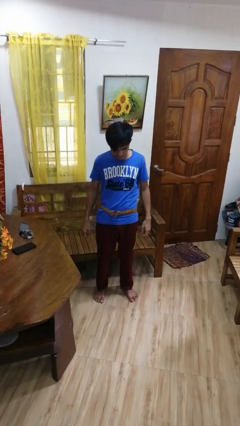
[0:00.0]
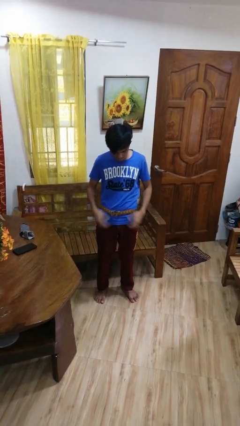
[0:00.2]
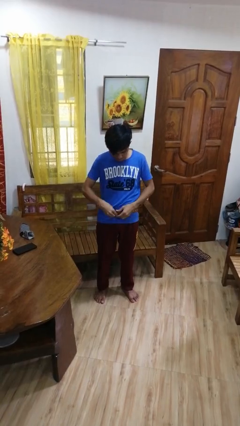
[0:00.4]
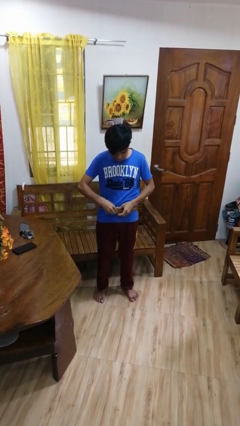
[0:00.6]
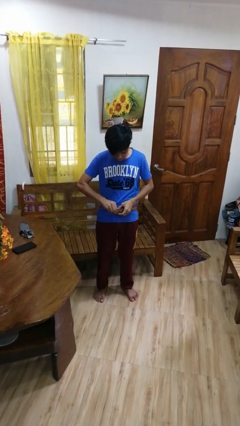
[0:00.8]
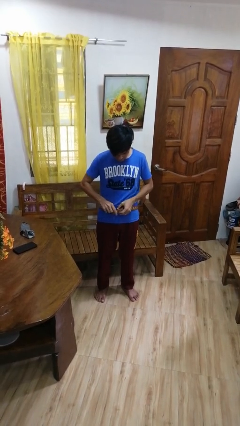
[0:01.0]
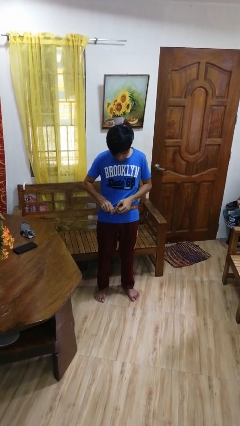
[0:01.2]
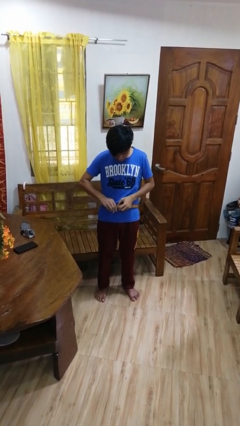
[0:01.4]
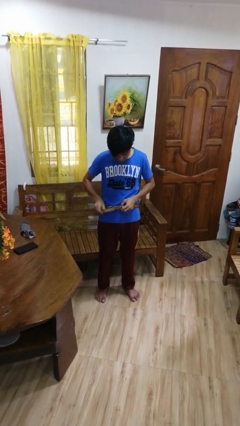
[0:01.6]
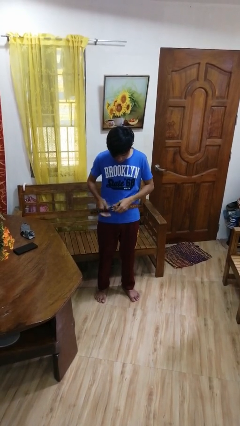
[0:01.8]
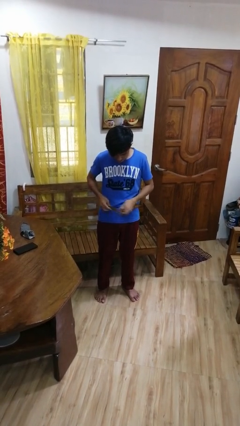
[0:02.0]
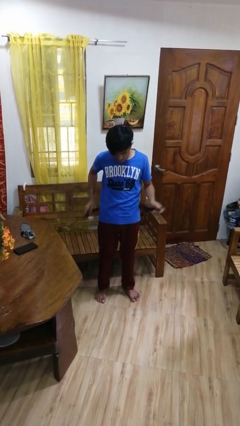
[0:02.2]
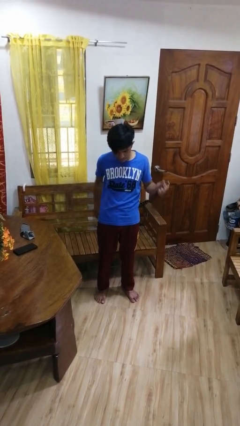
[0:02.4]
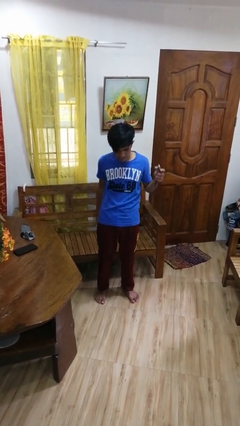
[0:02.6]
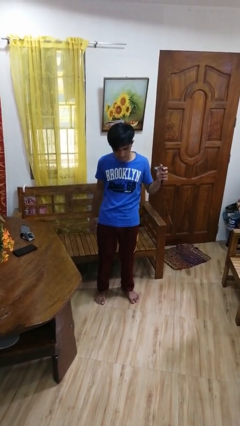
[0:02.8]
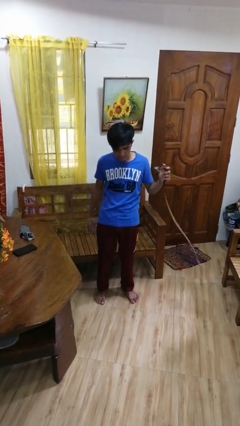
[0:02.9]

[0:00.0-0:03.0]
person takes off belt

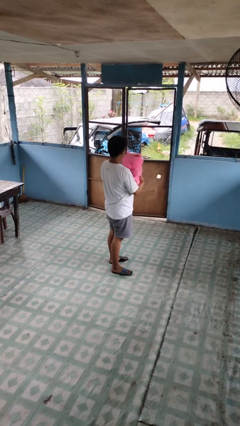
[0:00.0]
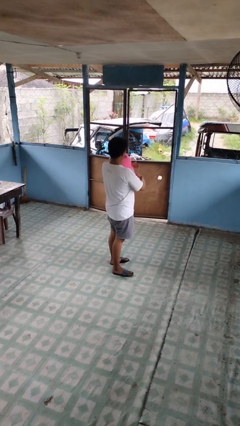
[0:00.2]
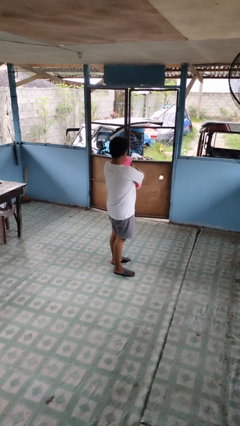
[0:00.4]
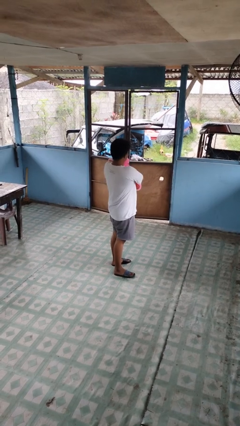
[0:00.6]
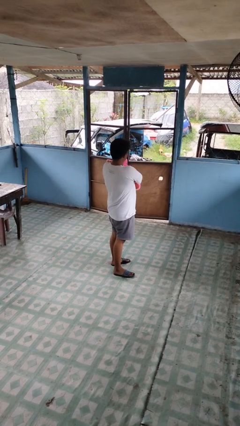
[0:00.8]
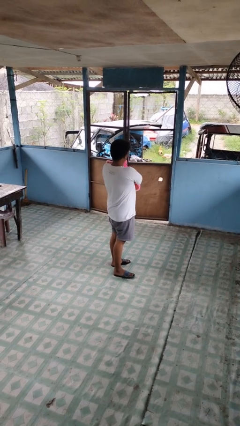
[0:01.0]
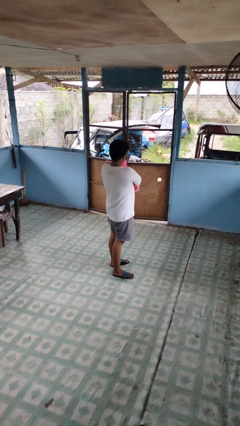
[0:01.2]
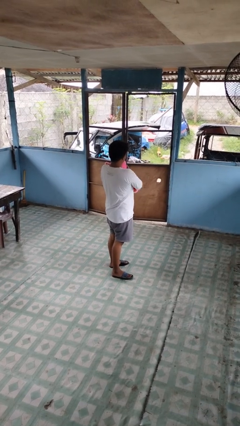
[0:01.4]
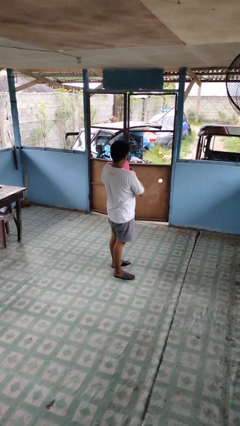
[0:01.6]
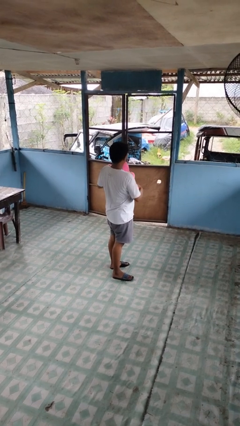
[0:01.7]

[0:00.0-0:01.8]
person hugs stuffed animal

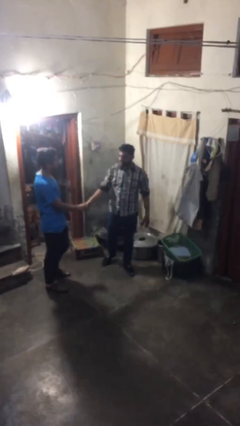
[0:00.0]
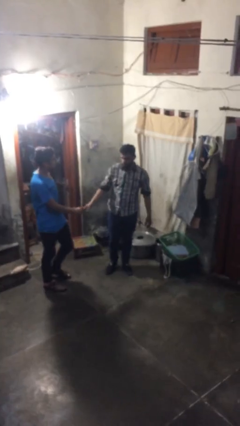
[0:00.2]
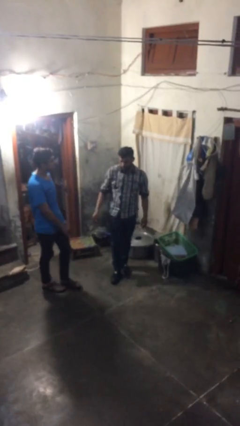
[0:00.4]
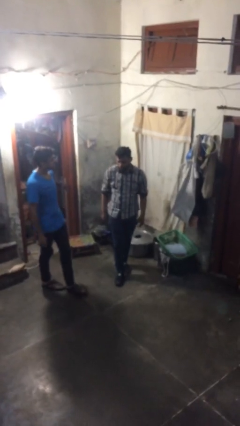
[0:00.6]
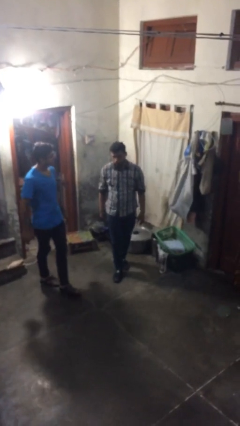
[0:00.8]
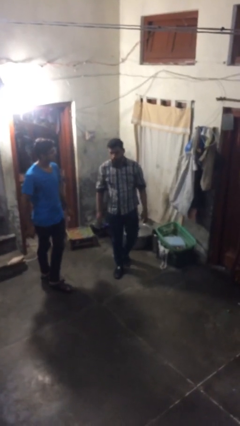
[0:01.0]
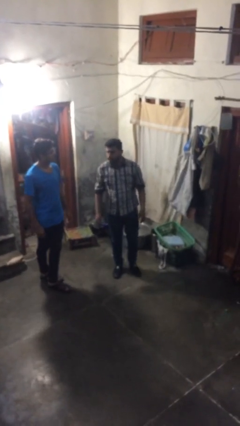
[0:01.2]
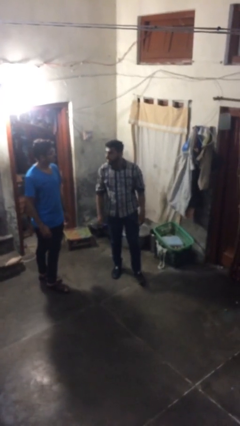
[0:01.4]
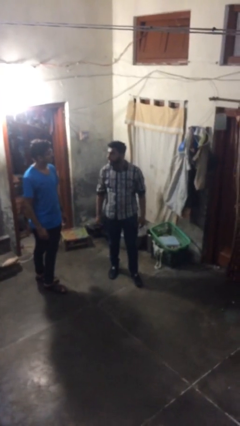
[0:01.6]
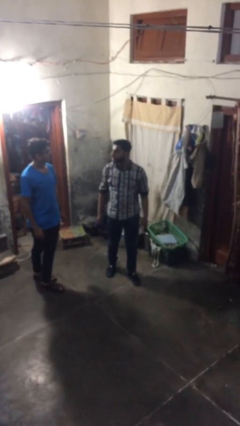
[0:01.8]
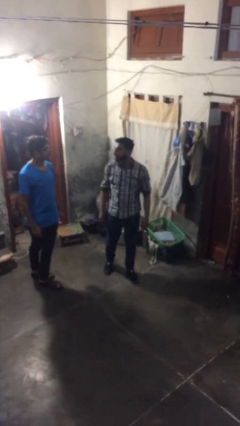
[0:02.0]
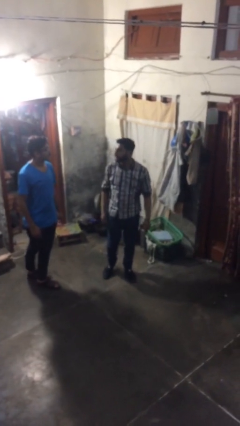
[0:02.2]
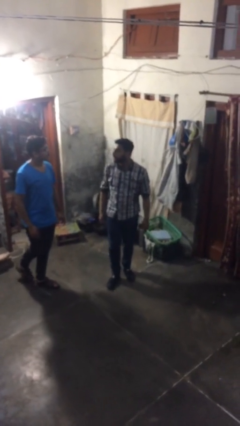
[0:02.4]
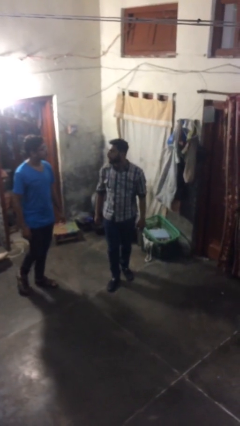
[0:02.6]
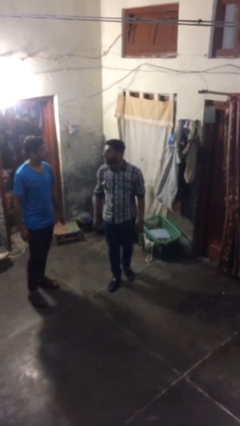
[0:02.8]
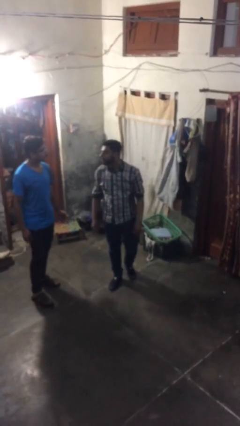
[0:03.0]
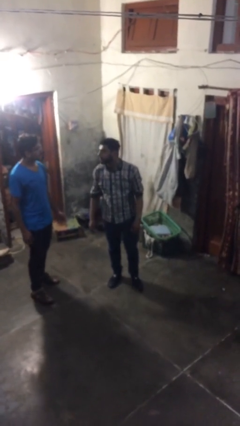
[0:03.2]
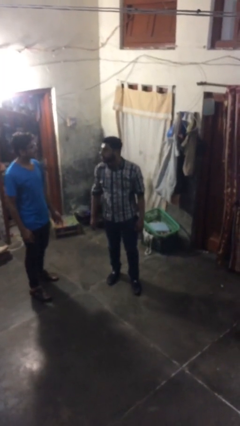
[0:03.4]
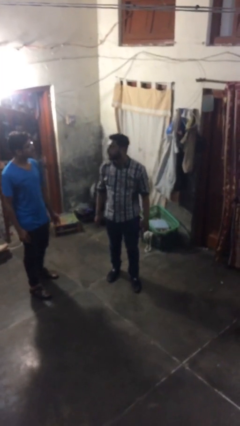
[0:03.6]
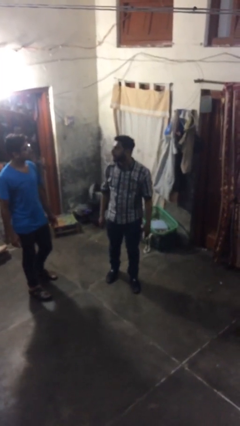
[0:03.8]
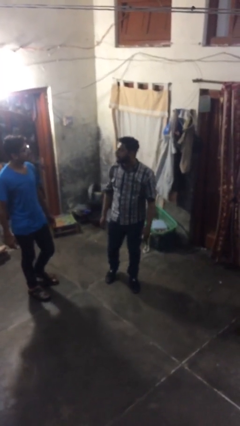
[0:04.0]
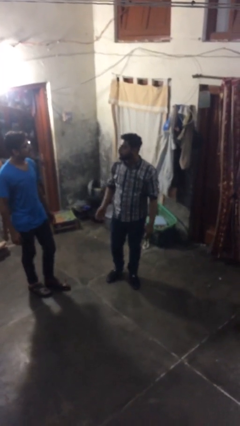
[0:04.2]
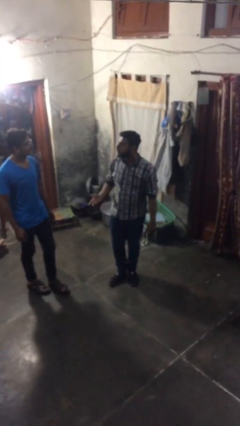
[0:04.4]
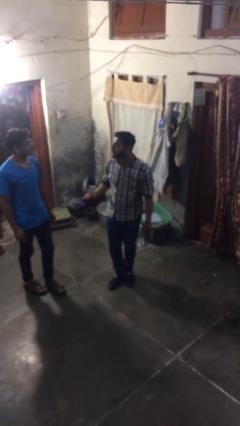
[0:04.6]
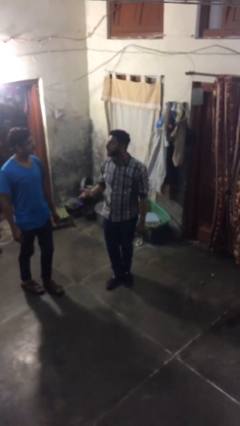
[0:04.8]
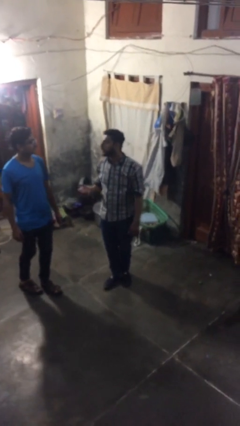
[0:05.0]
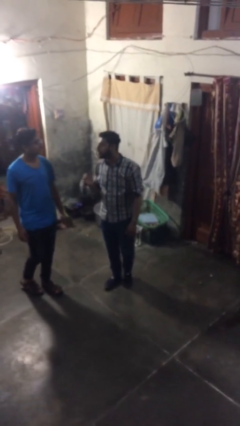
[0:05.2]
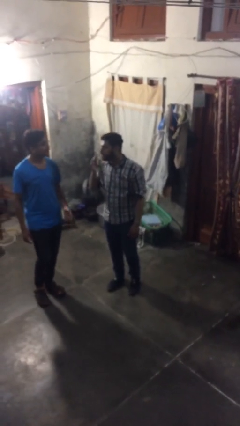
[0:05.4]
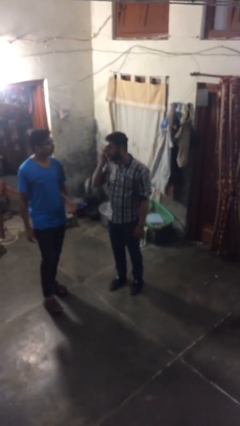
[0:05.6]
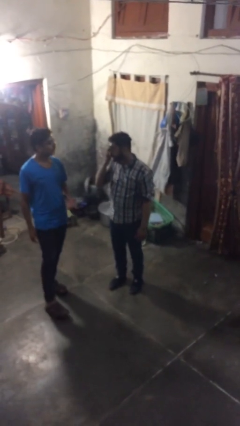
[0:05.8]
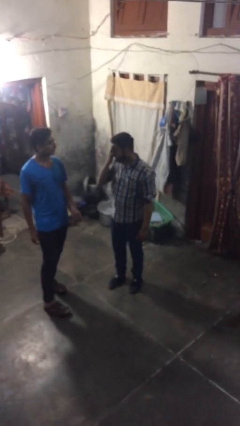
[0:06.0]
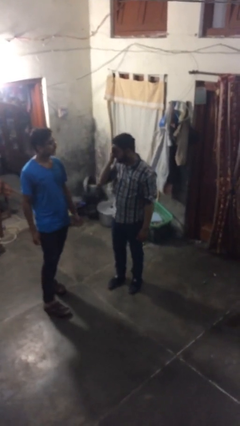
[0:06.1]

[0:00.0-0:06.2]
person talks to person

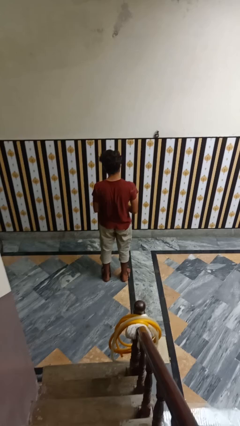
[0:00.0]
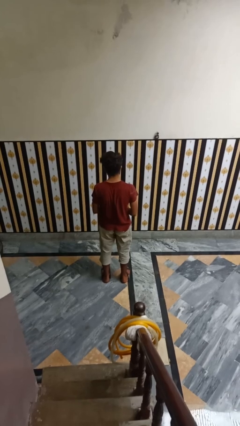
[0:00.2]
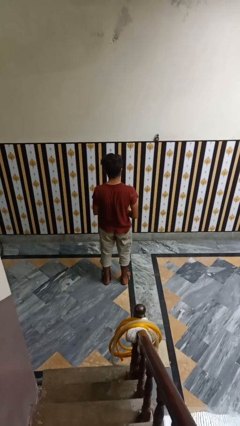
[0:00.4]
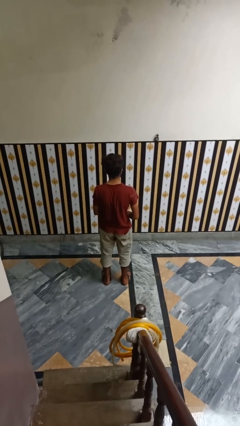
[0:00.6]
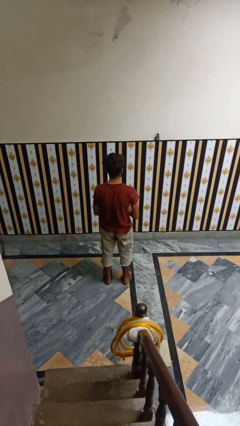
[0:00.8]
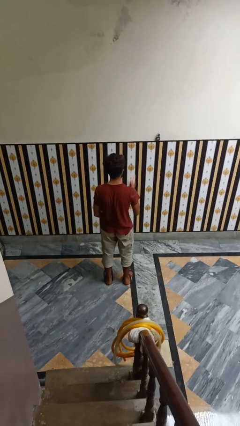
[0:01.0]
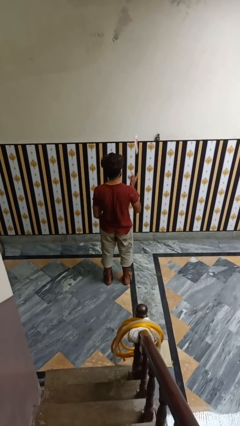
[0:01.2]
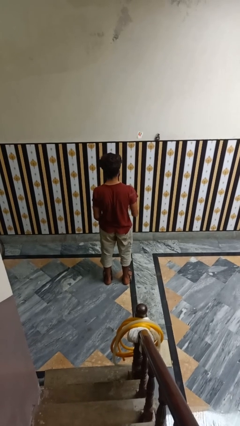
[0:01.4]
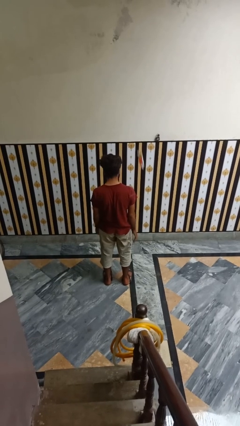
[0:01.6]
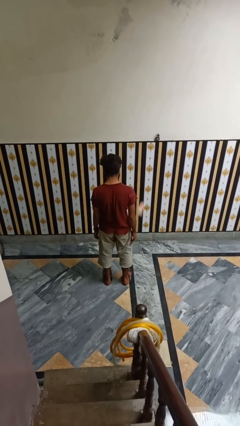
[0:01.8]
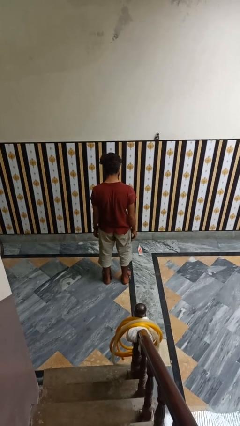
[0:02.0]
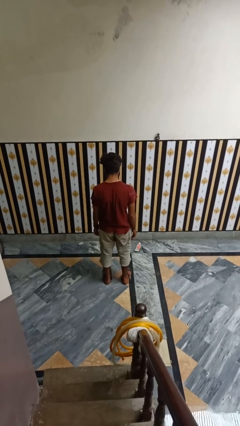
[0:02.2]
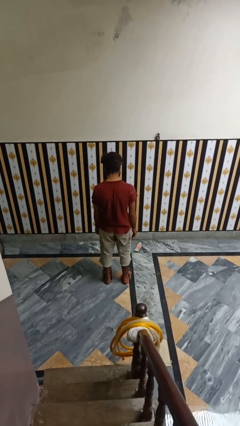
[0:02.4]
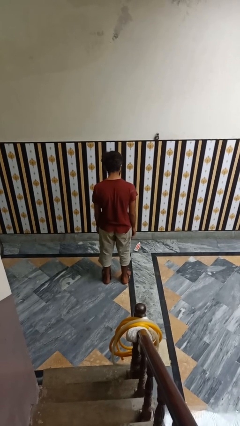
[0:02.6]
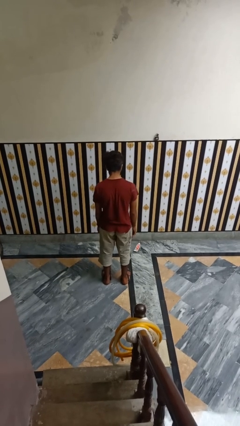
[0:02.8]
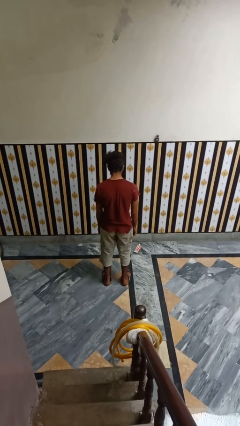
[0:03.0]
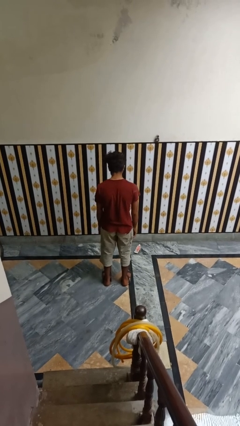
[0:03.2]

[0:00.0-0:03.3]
person throws object into air

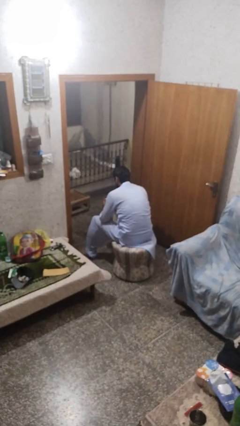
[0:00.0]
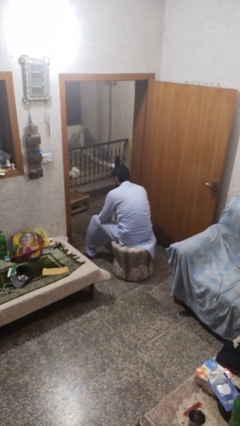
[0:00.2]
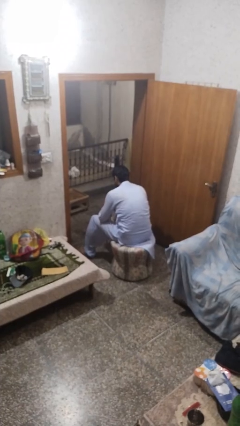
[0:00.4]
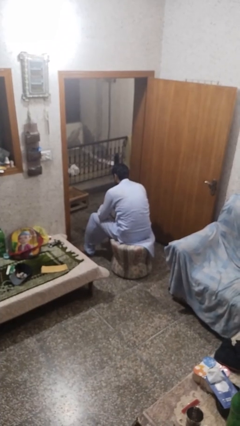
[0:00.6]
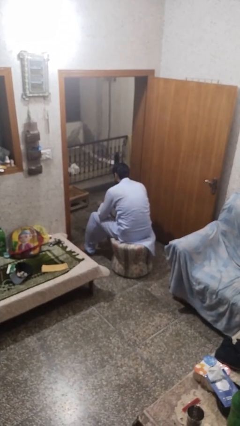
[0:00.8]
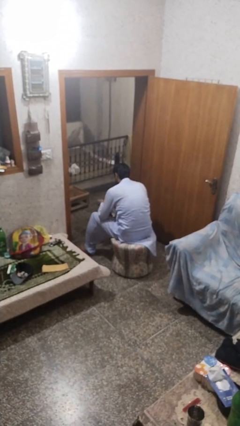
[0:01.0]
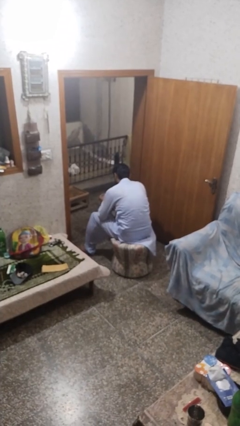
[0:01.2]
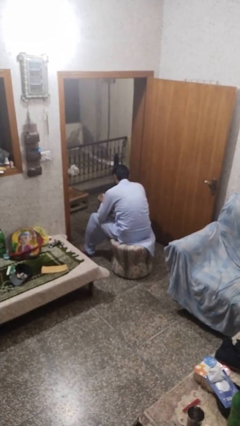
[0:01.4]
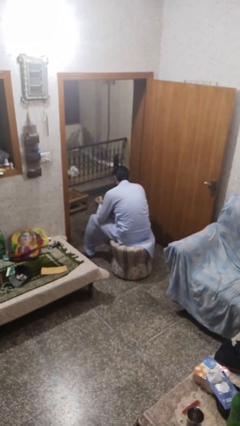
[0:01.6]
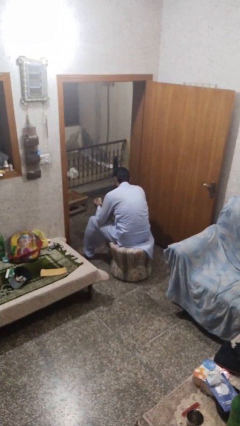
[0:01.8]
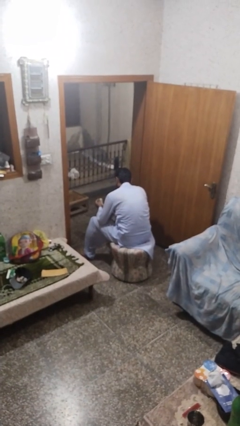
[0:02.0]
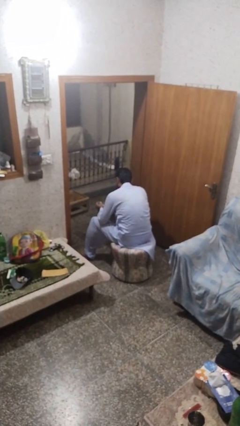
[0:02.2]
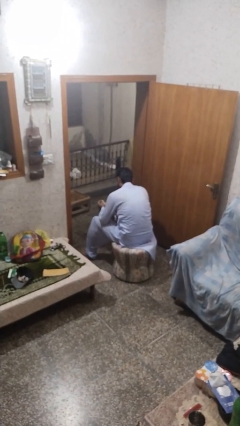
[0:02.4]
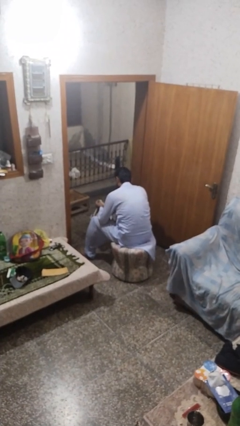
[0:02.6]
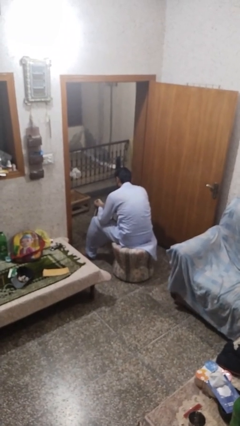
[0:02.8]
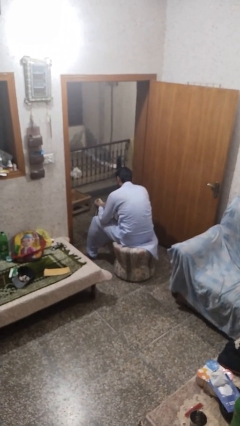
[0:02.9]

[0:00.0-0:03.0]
person puts object into purse

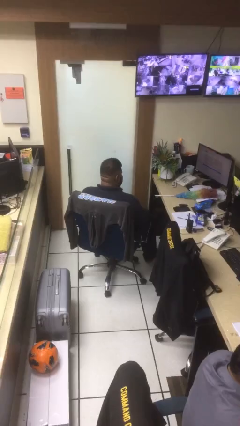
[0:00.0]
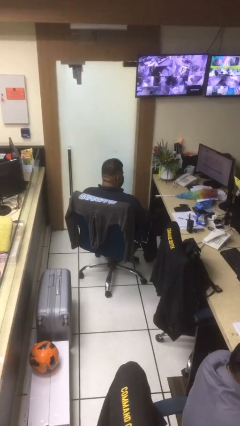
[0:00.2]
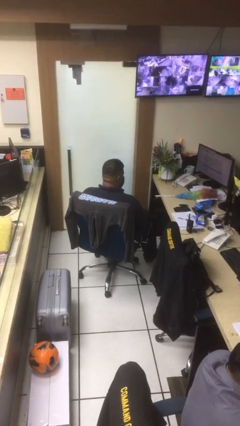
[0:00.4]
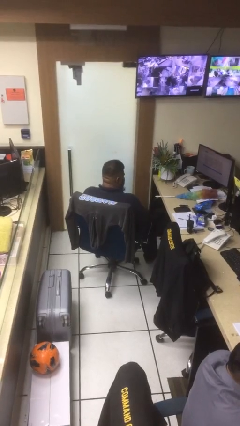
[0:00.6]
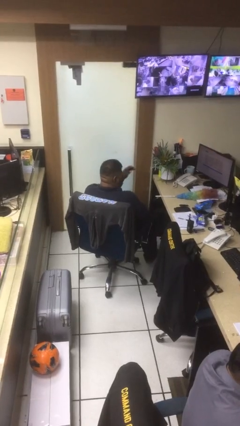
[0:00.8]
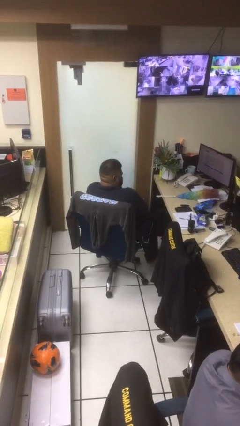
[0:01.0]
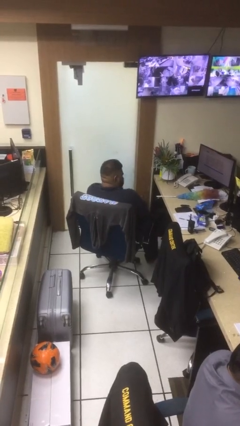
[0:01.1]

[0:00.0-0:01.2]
person swats bug
